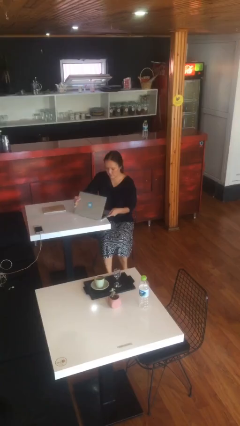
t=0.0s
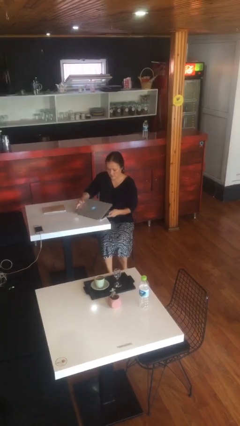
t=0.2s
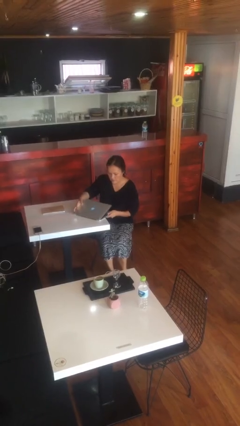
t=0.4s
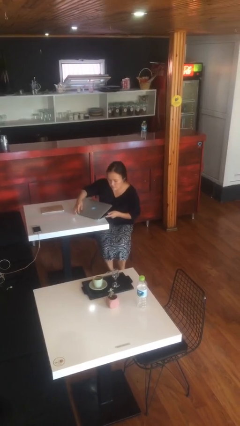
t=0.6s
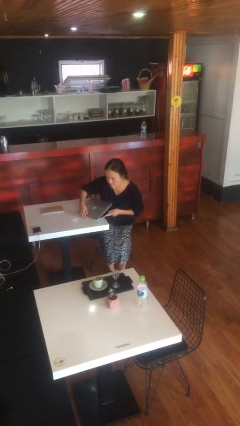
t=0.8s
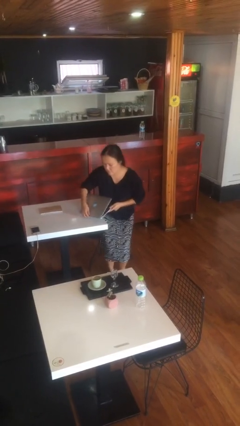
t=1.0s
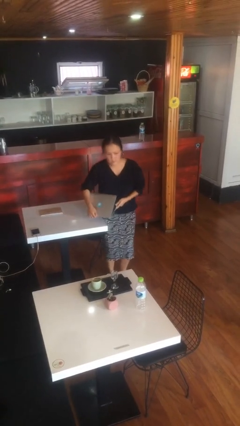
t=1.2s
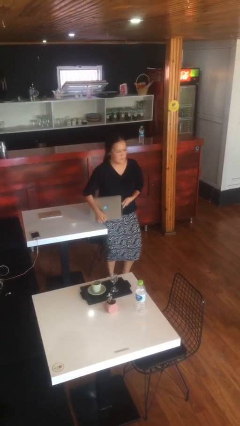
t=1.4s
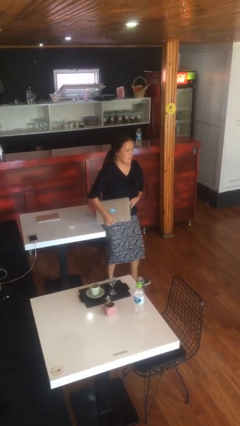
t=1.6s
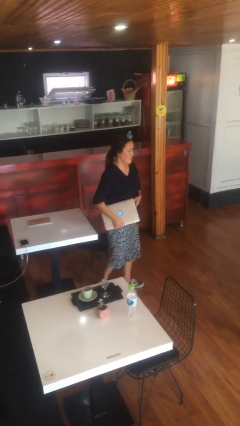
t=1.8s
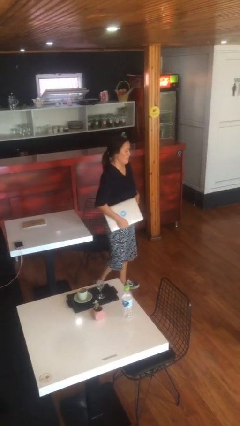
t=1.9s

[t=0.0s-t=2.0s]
person stands up

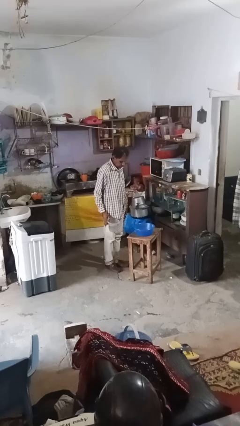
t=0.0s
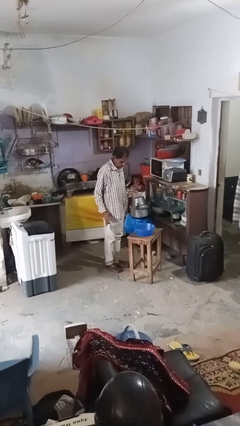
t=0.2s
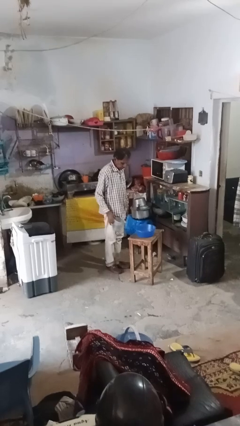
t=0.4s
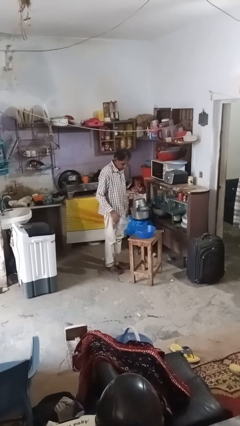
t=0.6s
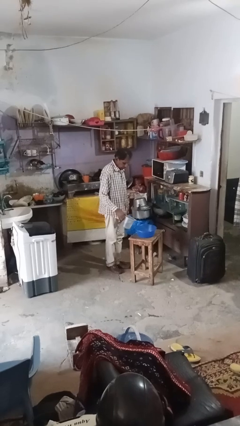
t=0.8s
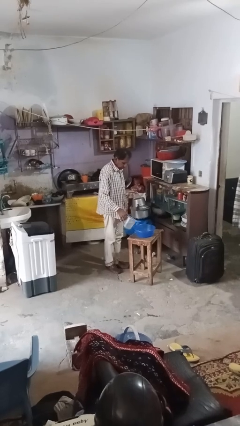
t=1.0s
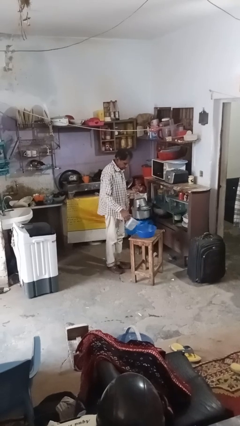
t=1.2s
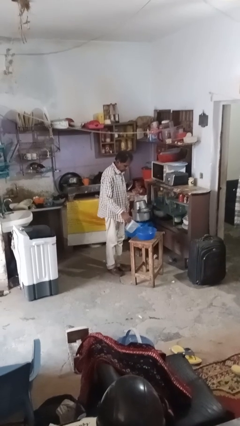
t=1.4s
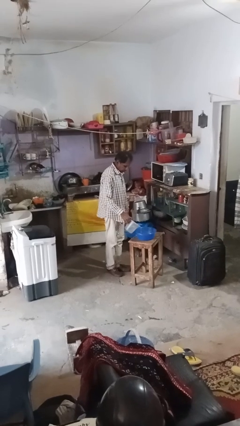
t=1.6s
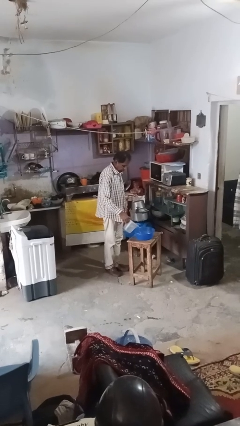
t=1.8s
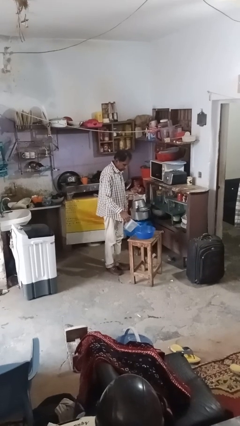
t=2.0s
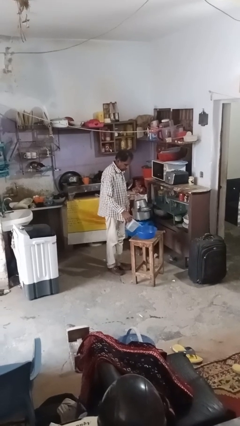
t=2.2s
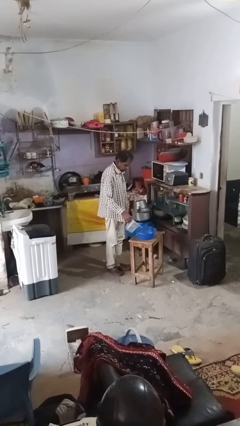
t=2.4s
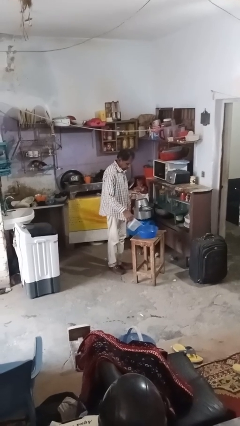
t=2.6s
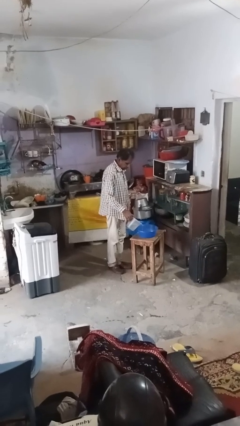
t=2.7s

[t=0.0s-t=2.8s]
person pours into bowl

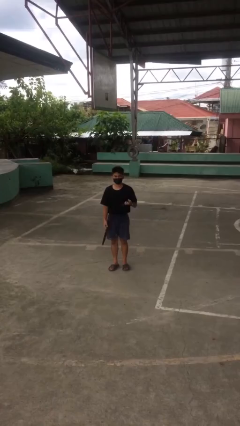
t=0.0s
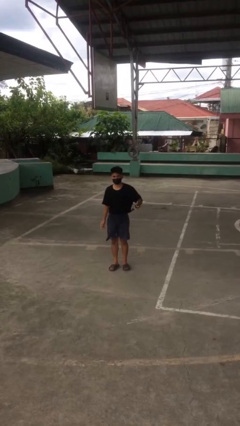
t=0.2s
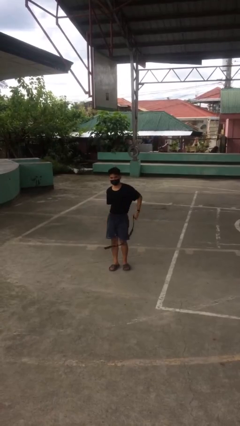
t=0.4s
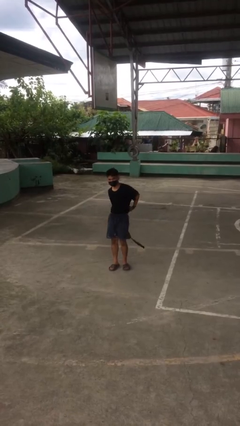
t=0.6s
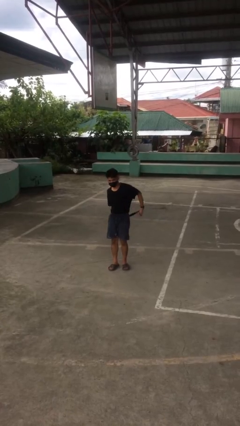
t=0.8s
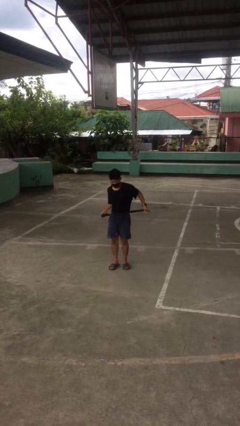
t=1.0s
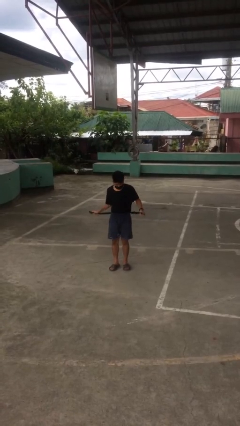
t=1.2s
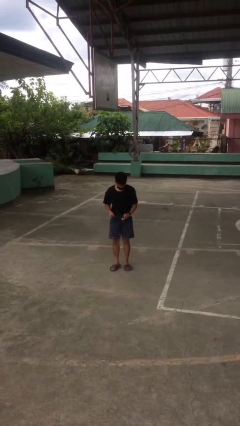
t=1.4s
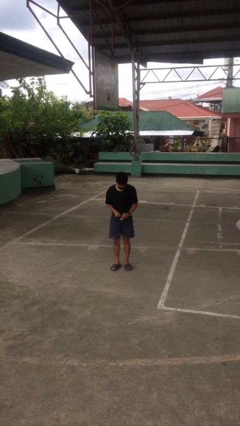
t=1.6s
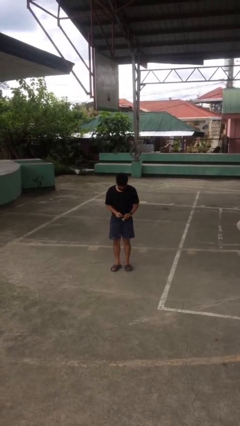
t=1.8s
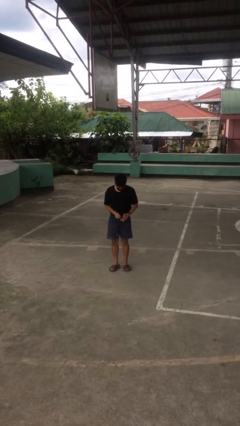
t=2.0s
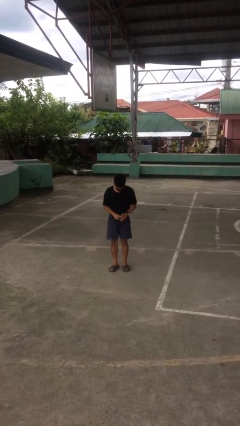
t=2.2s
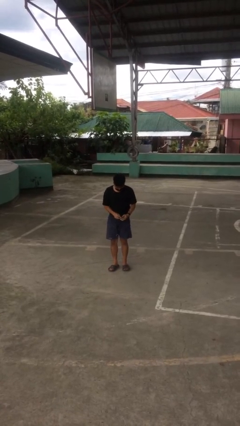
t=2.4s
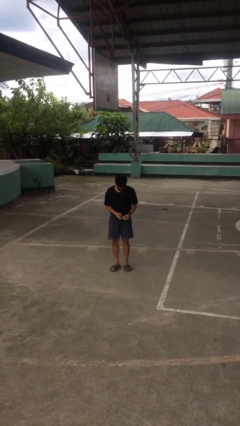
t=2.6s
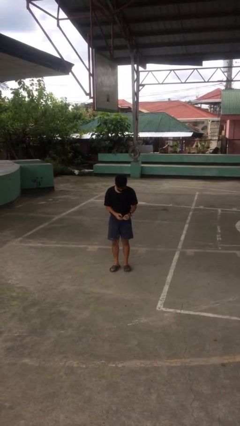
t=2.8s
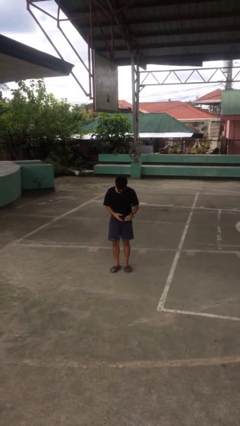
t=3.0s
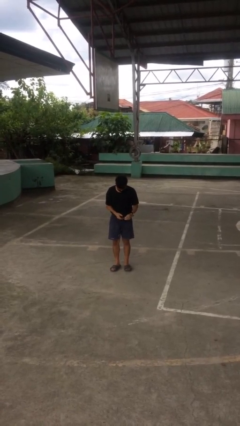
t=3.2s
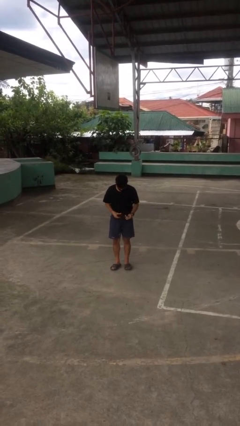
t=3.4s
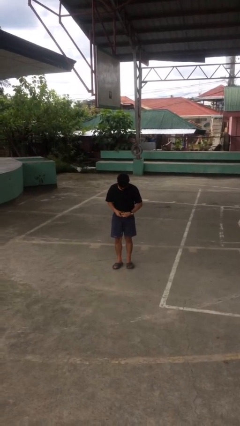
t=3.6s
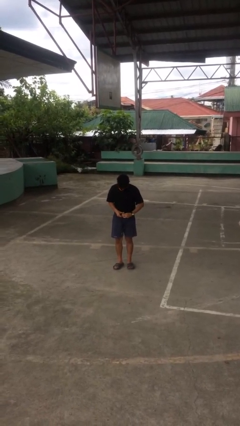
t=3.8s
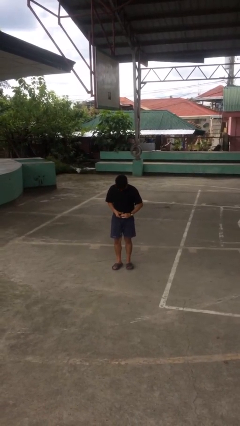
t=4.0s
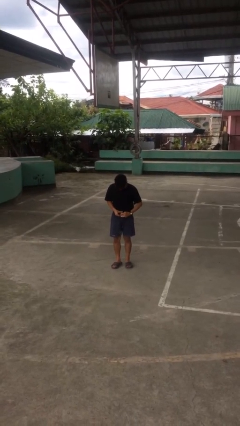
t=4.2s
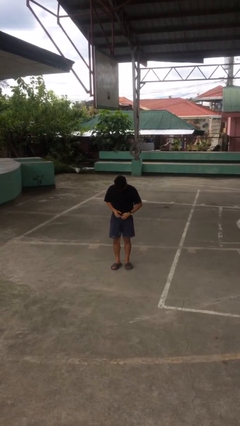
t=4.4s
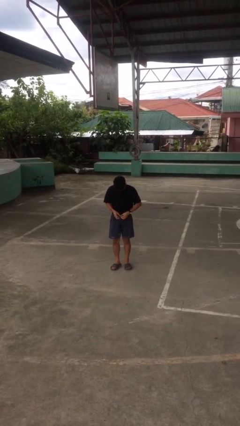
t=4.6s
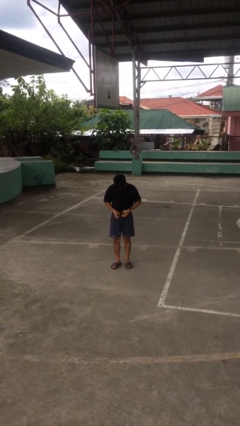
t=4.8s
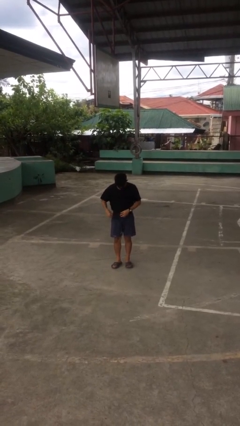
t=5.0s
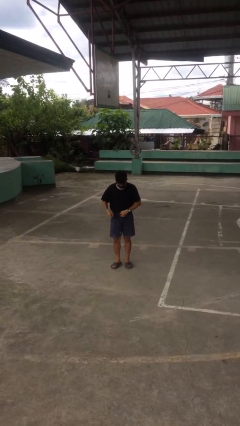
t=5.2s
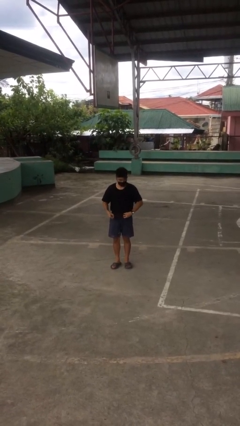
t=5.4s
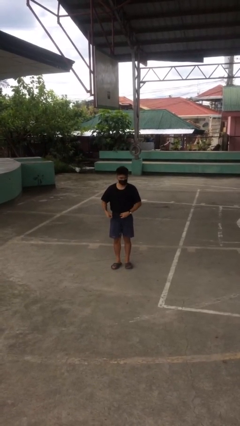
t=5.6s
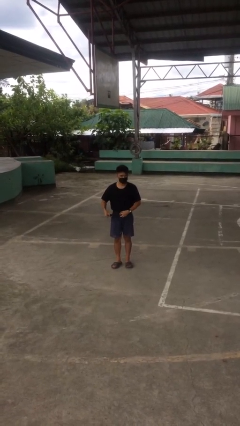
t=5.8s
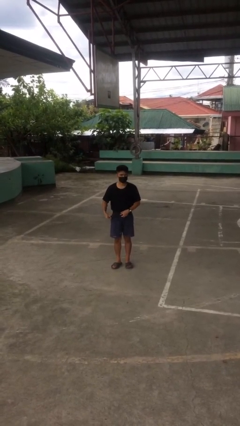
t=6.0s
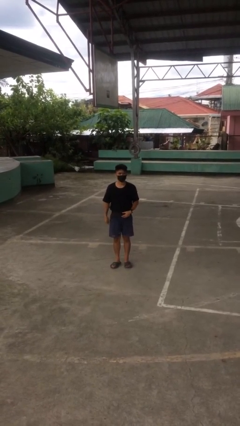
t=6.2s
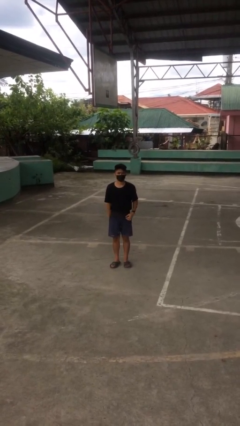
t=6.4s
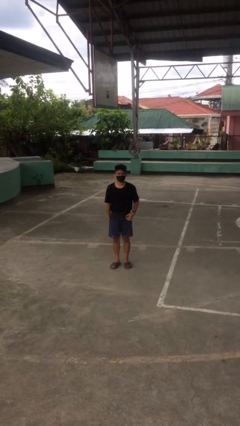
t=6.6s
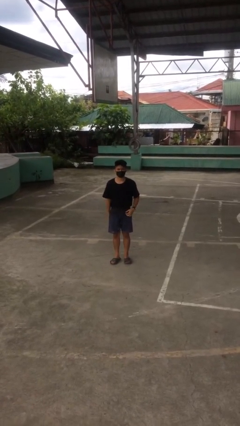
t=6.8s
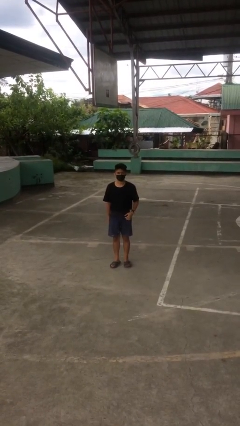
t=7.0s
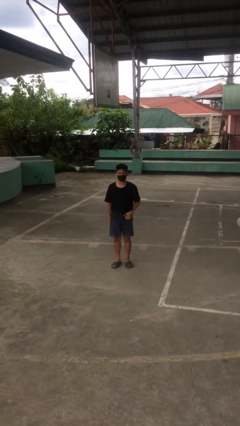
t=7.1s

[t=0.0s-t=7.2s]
person puts on belt

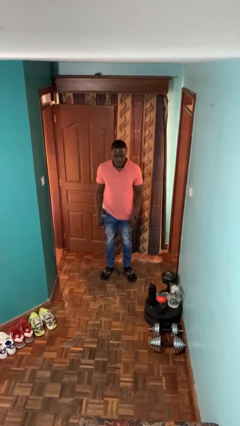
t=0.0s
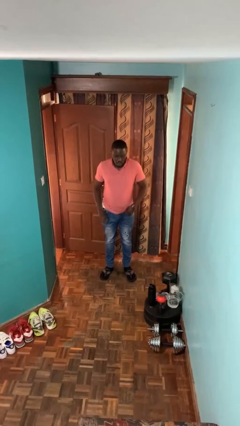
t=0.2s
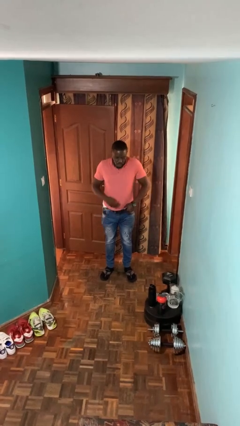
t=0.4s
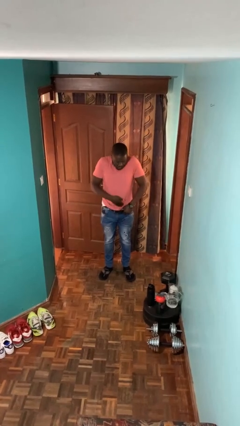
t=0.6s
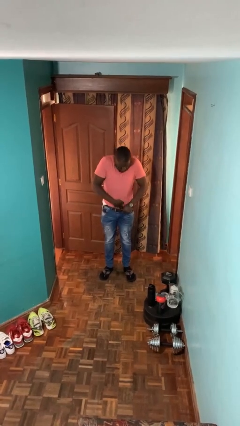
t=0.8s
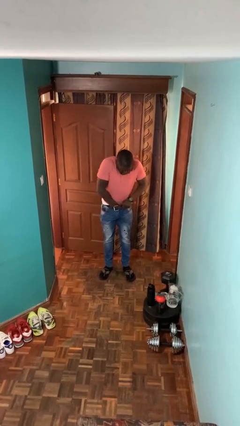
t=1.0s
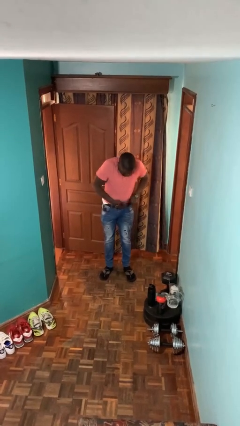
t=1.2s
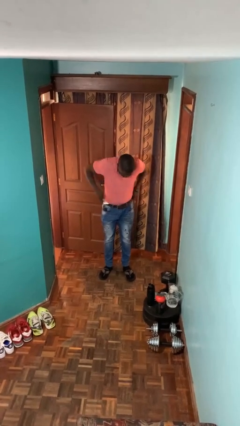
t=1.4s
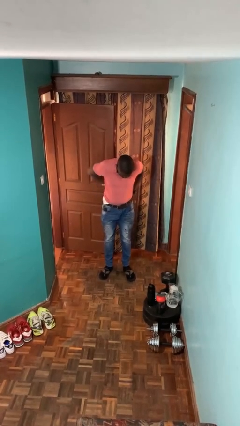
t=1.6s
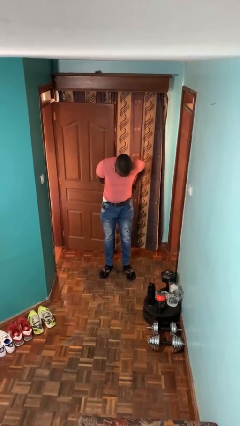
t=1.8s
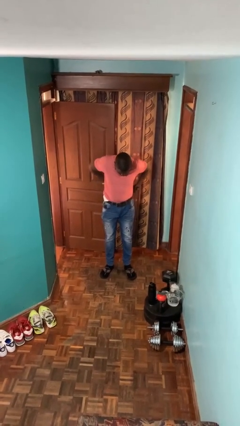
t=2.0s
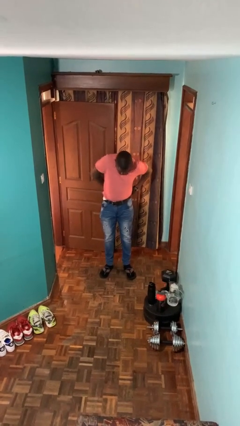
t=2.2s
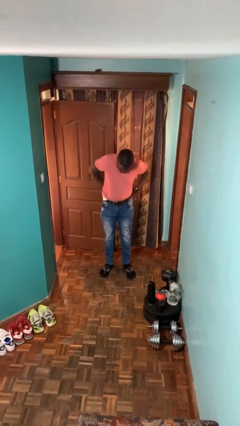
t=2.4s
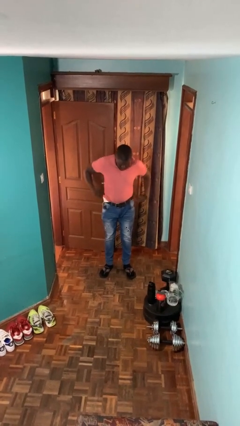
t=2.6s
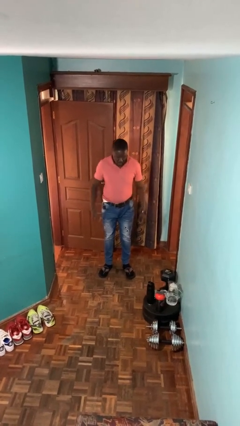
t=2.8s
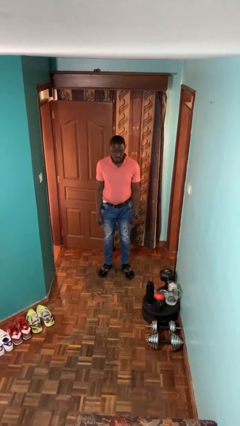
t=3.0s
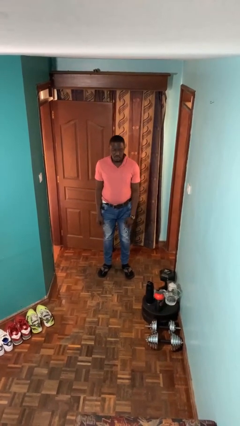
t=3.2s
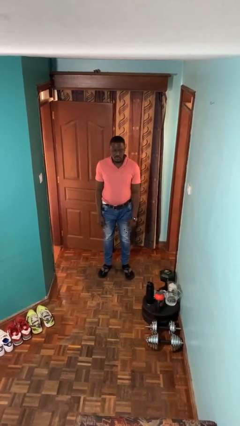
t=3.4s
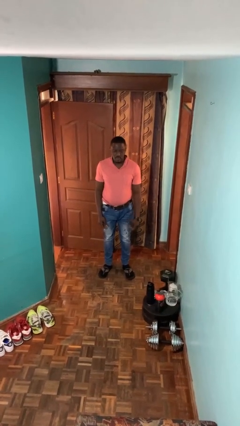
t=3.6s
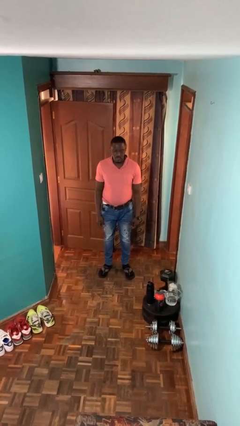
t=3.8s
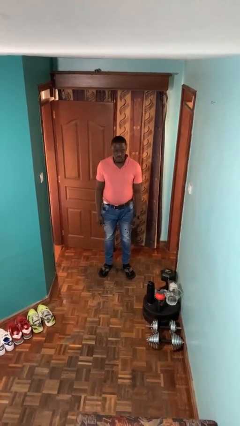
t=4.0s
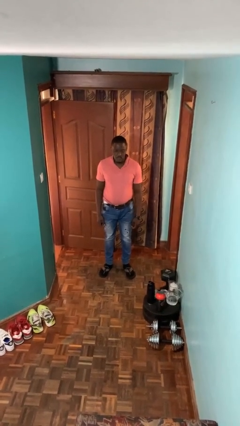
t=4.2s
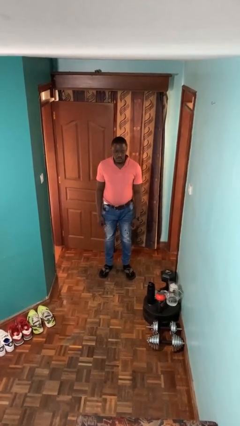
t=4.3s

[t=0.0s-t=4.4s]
person tucks in shirt

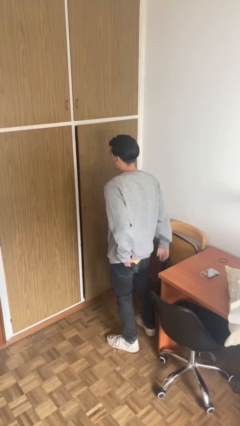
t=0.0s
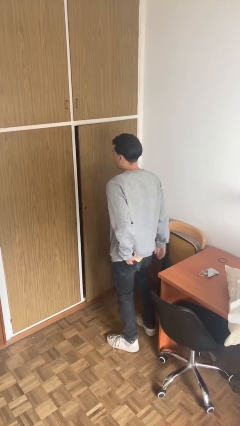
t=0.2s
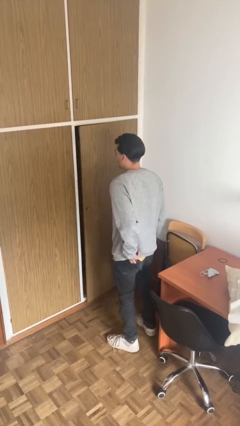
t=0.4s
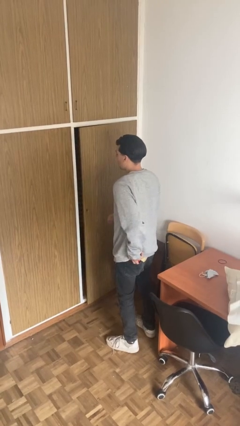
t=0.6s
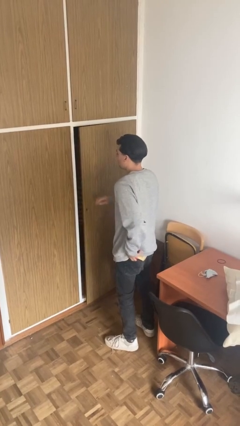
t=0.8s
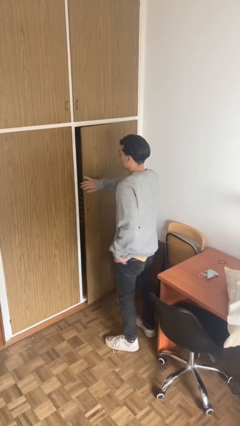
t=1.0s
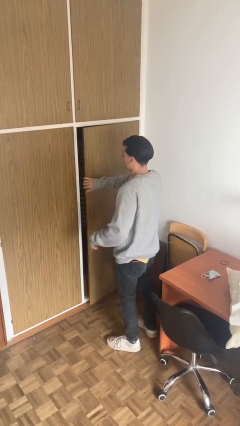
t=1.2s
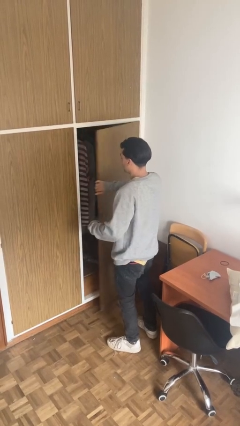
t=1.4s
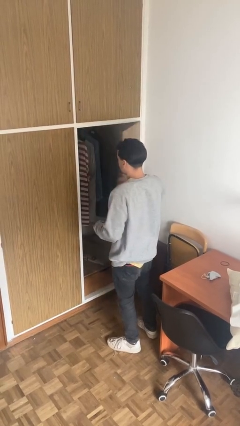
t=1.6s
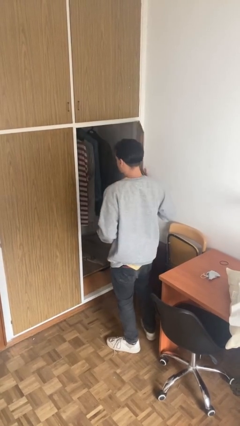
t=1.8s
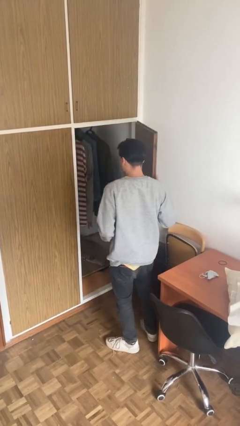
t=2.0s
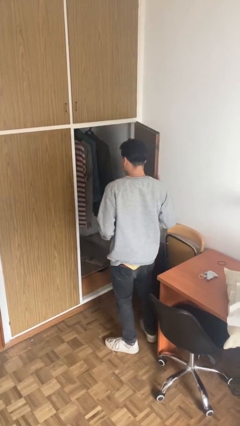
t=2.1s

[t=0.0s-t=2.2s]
person opens closet door
